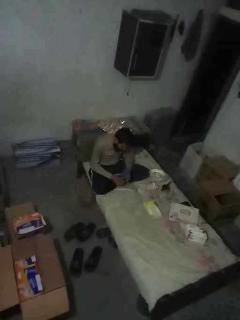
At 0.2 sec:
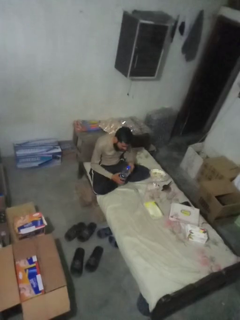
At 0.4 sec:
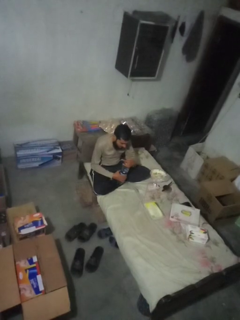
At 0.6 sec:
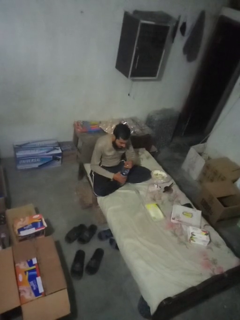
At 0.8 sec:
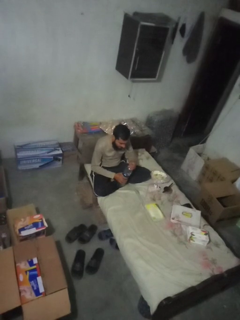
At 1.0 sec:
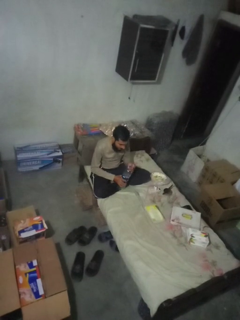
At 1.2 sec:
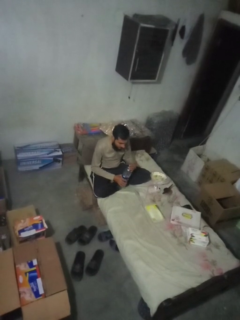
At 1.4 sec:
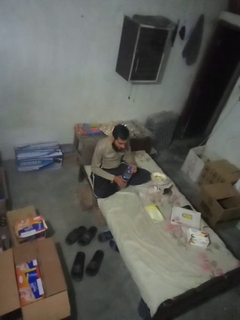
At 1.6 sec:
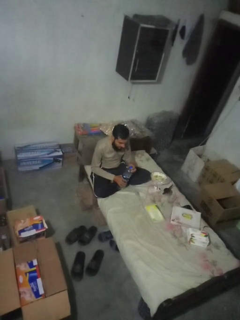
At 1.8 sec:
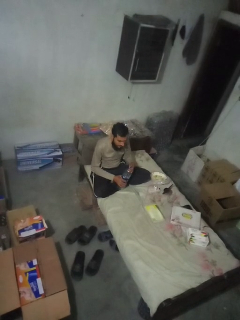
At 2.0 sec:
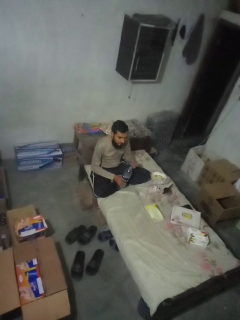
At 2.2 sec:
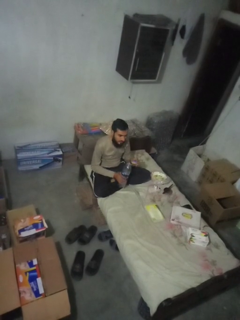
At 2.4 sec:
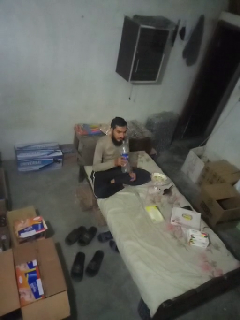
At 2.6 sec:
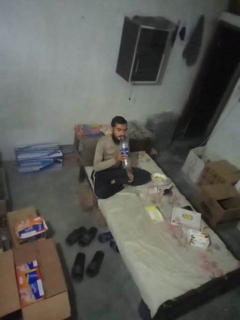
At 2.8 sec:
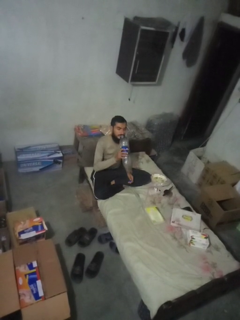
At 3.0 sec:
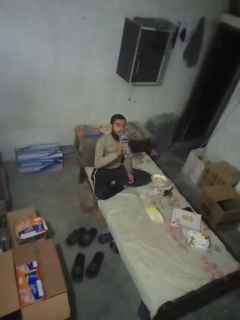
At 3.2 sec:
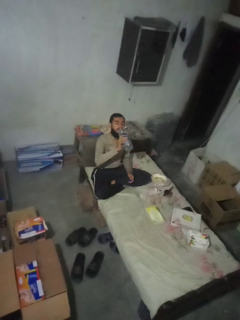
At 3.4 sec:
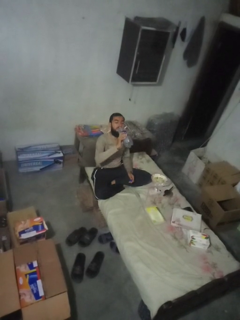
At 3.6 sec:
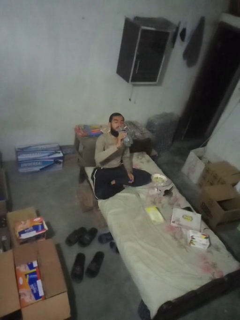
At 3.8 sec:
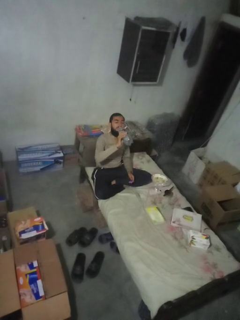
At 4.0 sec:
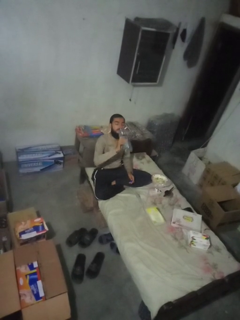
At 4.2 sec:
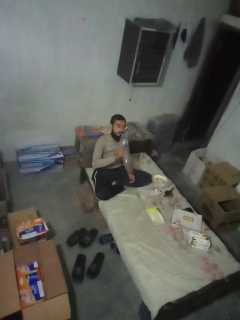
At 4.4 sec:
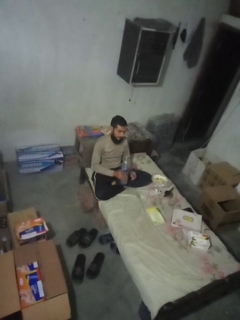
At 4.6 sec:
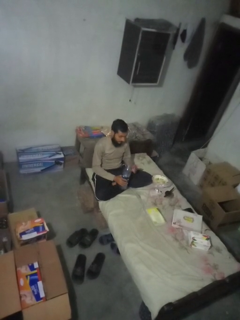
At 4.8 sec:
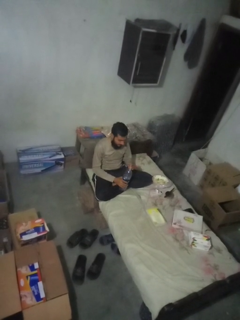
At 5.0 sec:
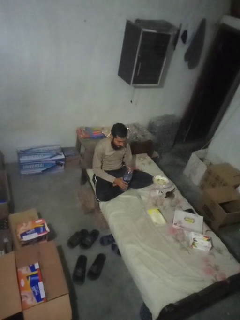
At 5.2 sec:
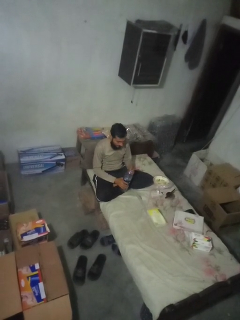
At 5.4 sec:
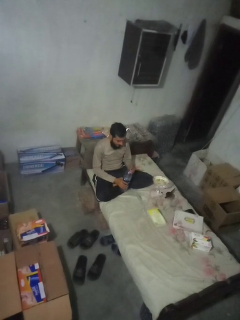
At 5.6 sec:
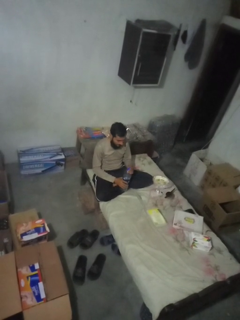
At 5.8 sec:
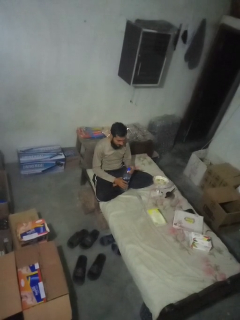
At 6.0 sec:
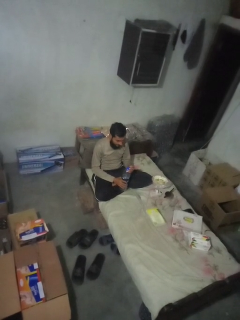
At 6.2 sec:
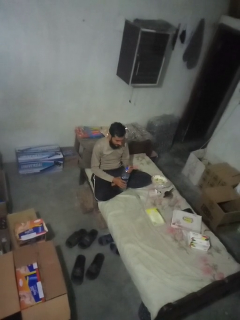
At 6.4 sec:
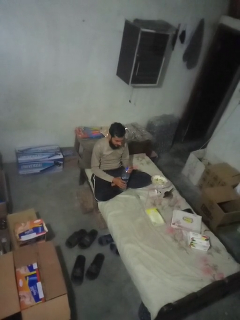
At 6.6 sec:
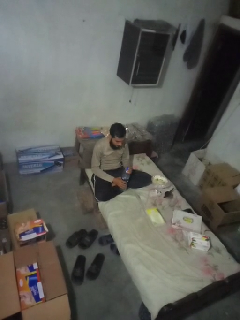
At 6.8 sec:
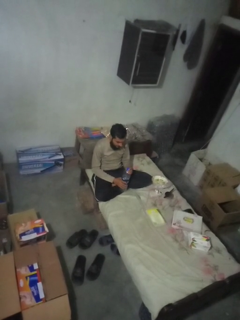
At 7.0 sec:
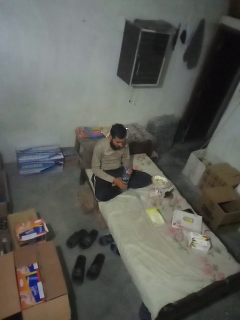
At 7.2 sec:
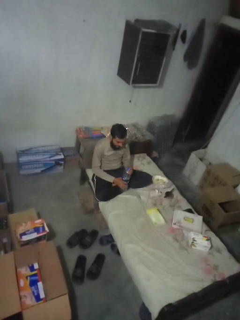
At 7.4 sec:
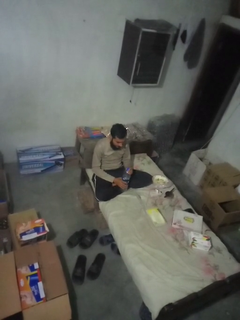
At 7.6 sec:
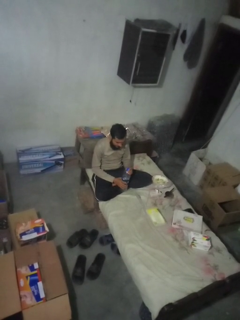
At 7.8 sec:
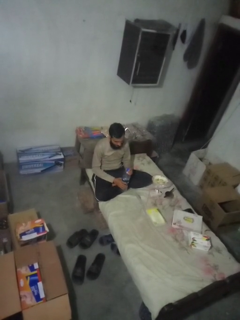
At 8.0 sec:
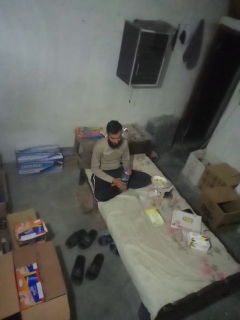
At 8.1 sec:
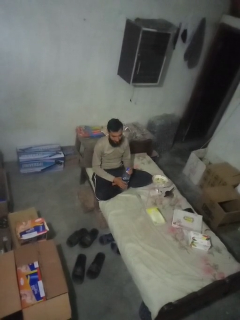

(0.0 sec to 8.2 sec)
person drinks from bottle

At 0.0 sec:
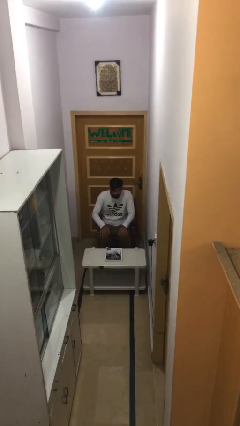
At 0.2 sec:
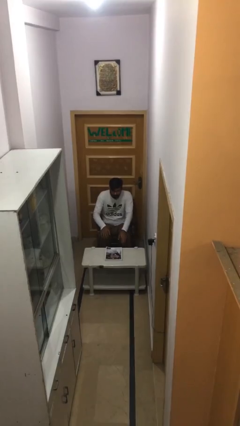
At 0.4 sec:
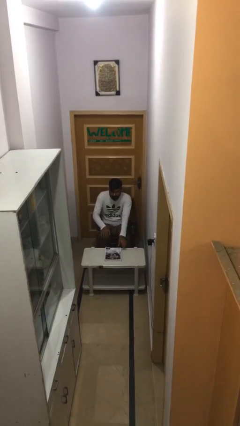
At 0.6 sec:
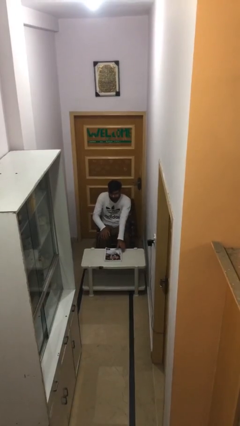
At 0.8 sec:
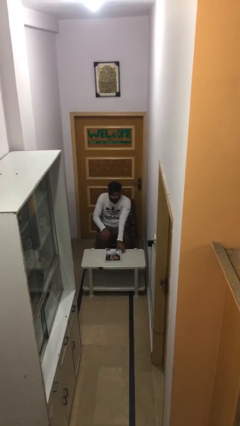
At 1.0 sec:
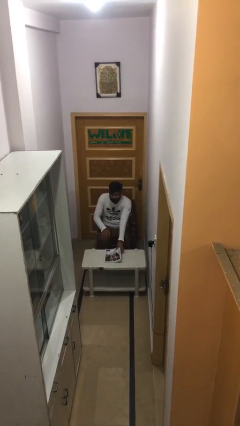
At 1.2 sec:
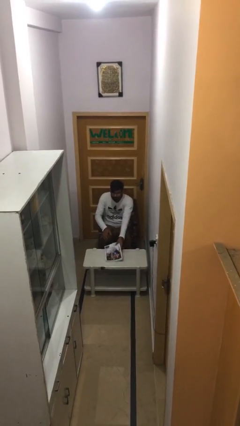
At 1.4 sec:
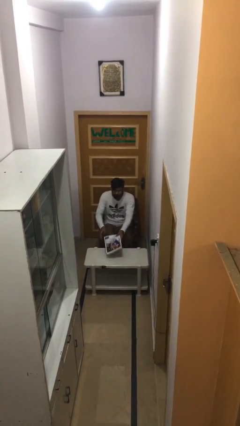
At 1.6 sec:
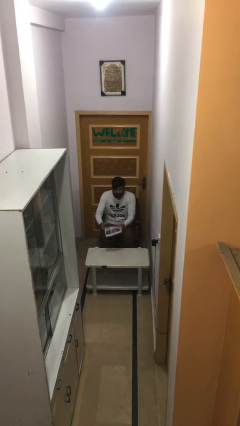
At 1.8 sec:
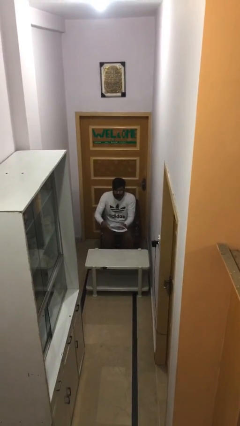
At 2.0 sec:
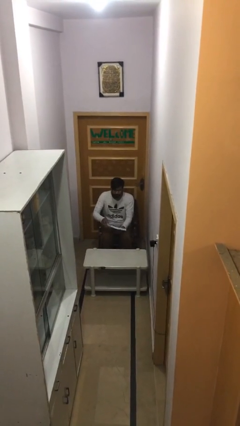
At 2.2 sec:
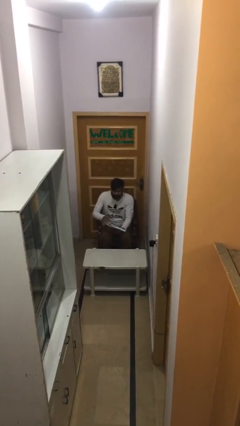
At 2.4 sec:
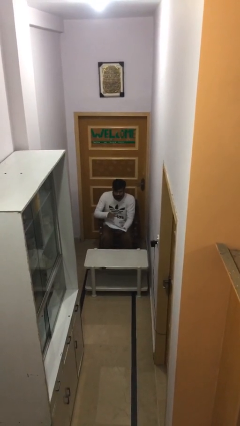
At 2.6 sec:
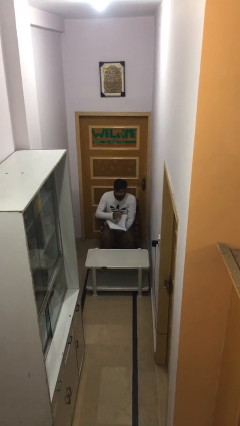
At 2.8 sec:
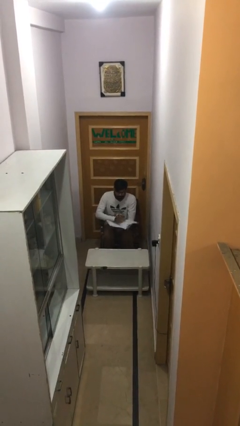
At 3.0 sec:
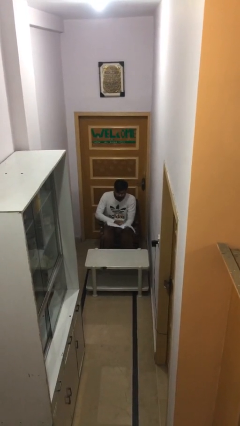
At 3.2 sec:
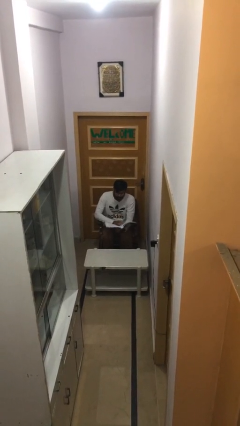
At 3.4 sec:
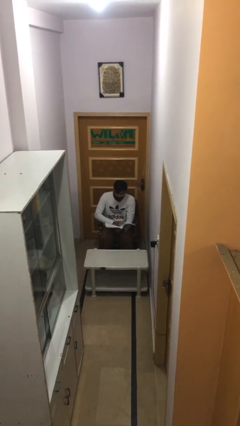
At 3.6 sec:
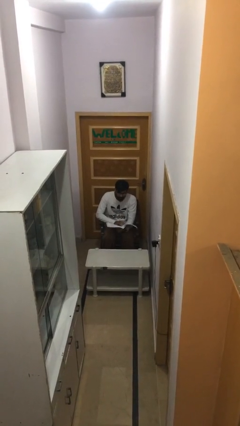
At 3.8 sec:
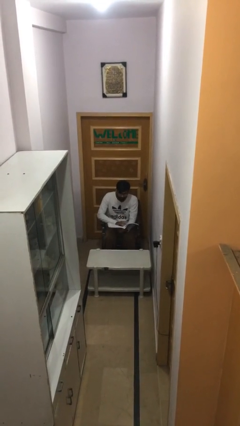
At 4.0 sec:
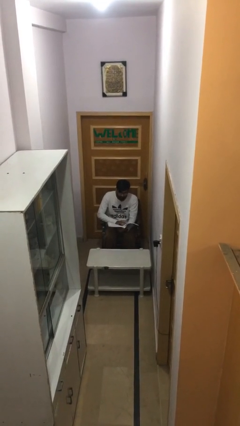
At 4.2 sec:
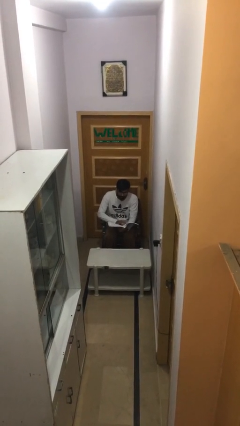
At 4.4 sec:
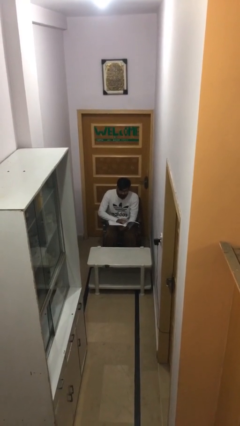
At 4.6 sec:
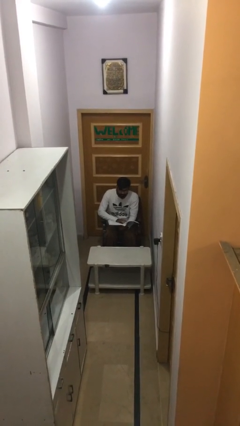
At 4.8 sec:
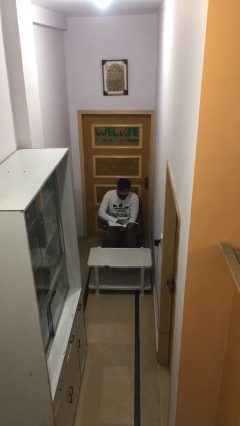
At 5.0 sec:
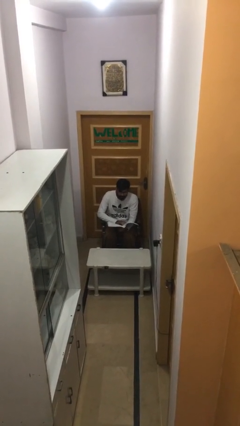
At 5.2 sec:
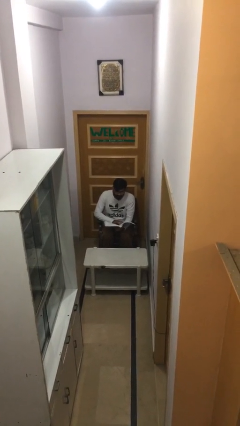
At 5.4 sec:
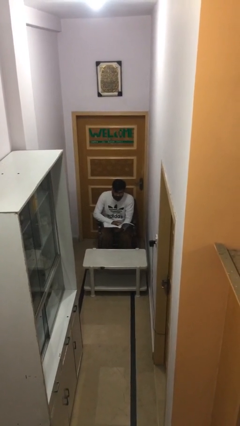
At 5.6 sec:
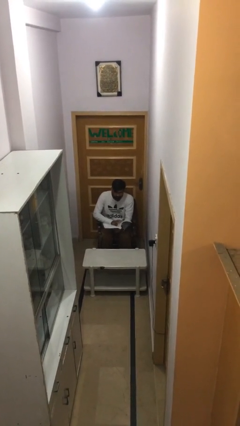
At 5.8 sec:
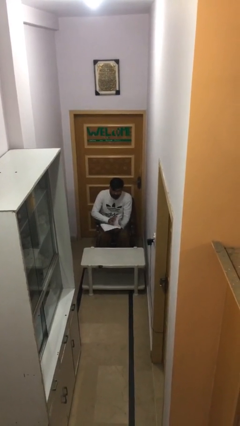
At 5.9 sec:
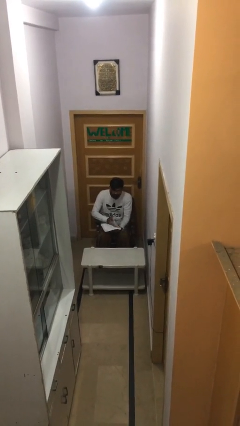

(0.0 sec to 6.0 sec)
person reads document

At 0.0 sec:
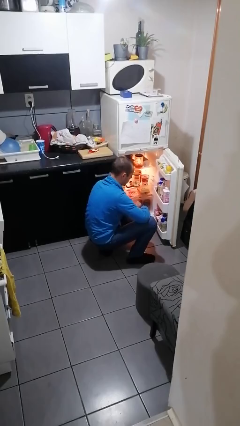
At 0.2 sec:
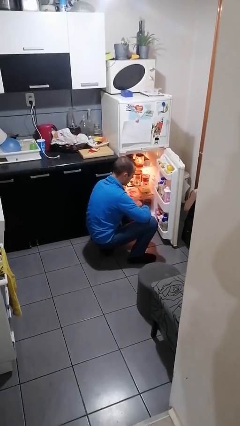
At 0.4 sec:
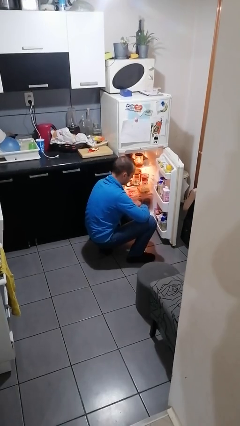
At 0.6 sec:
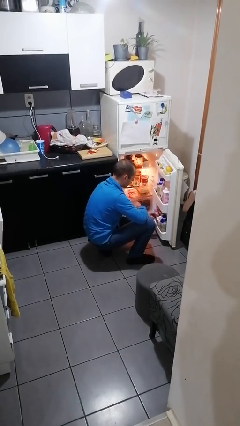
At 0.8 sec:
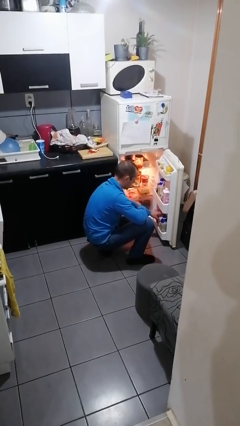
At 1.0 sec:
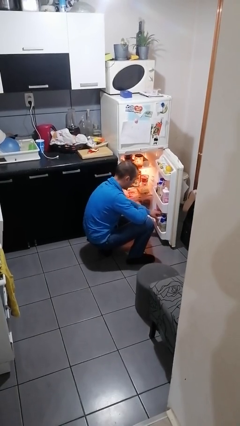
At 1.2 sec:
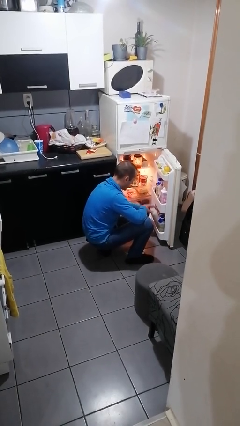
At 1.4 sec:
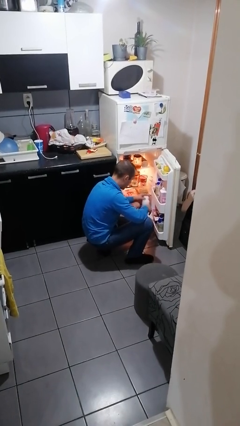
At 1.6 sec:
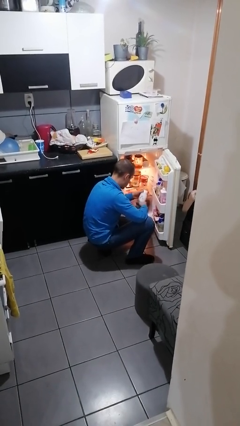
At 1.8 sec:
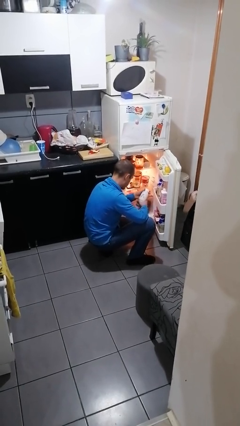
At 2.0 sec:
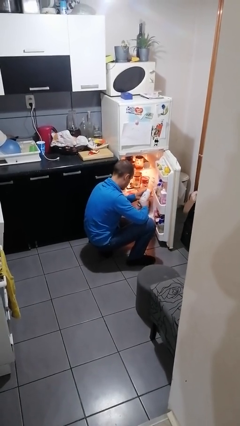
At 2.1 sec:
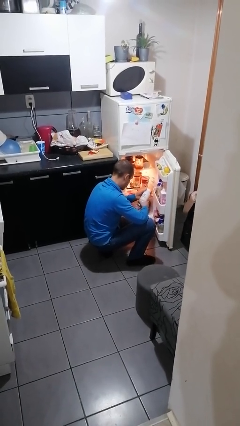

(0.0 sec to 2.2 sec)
person takes object from refrigerator

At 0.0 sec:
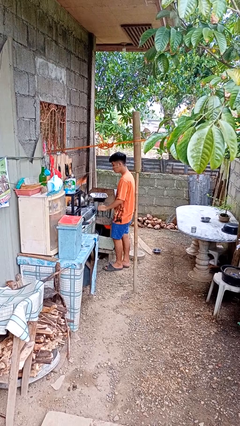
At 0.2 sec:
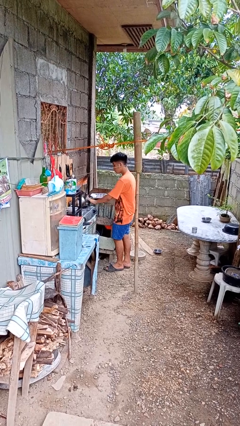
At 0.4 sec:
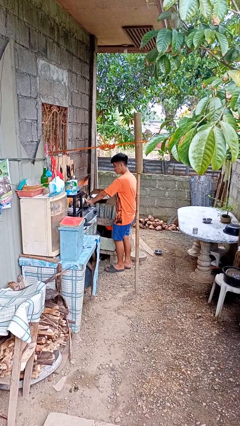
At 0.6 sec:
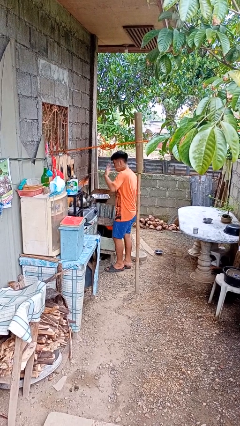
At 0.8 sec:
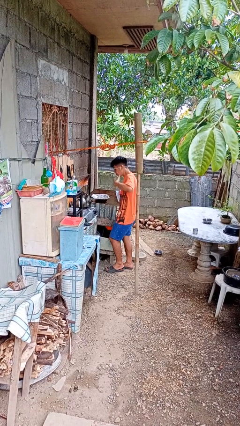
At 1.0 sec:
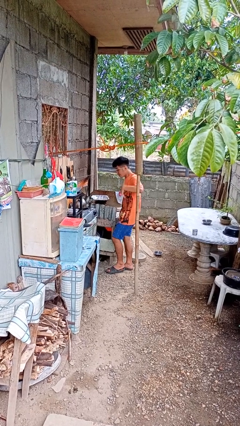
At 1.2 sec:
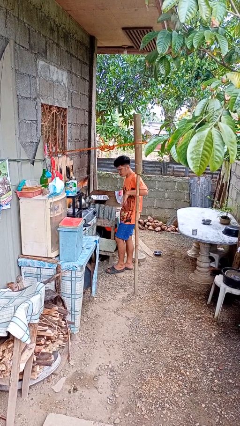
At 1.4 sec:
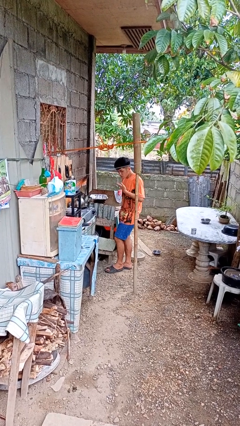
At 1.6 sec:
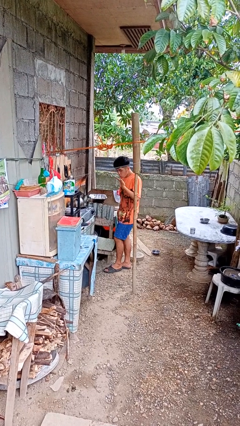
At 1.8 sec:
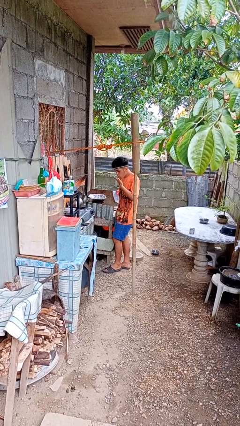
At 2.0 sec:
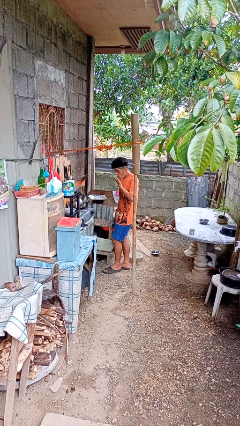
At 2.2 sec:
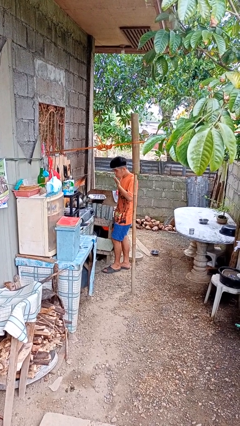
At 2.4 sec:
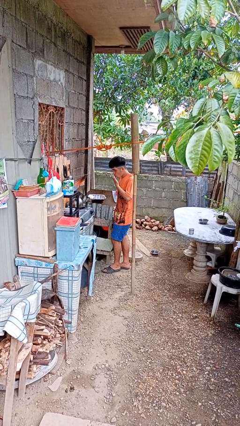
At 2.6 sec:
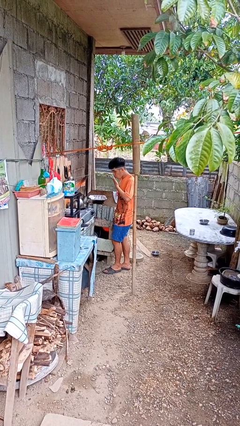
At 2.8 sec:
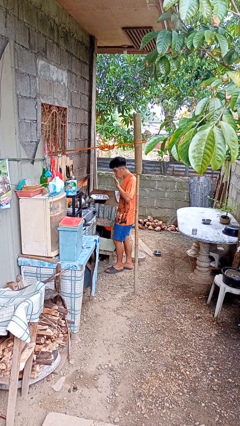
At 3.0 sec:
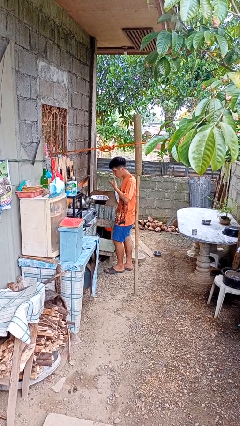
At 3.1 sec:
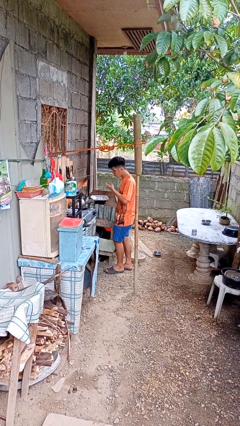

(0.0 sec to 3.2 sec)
person burns hand
